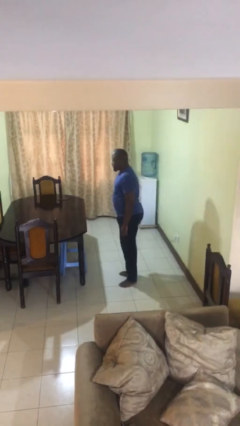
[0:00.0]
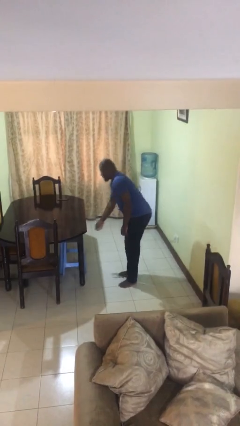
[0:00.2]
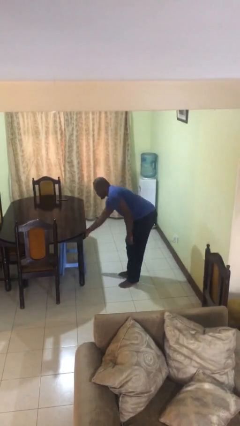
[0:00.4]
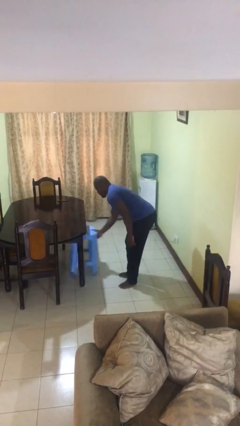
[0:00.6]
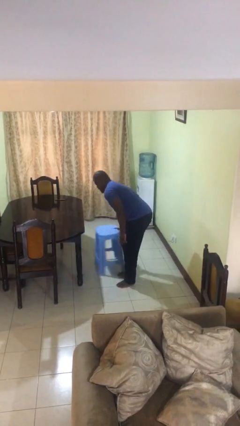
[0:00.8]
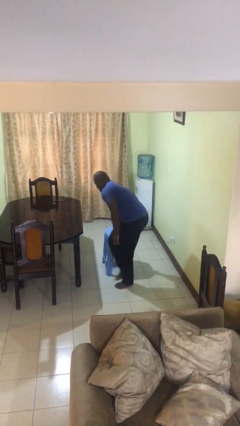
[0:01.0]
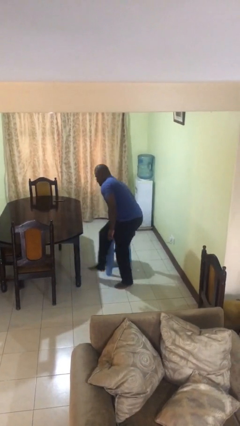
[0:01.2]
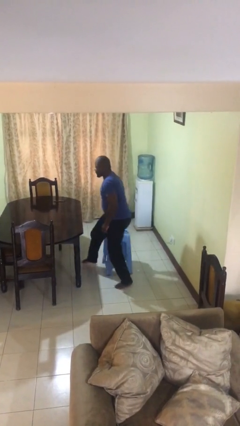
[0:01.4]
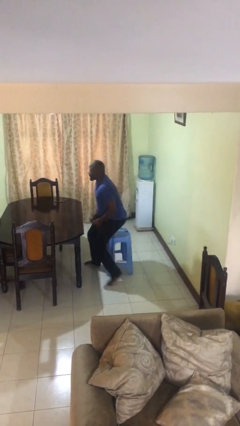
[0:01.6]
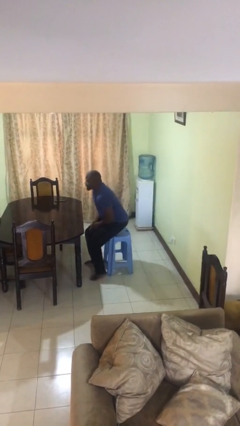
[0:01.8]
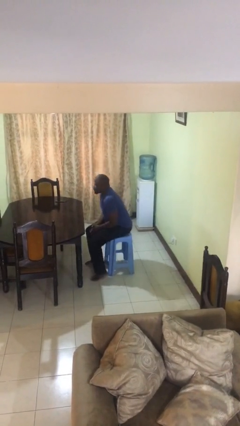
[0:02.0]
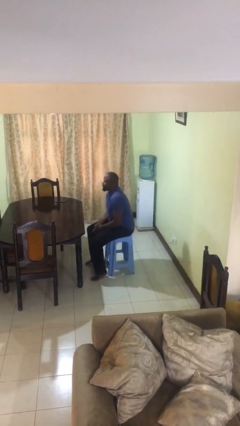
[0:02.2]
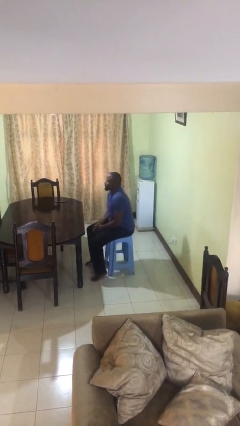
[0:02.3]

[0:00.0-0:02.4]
person sits down

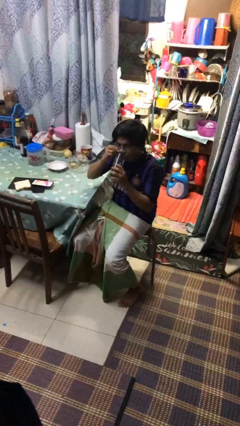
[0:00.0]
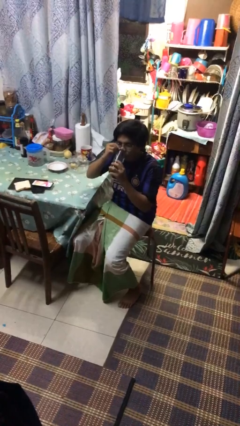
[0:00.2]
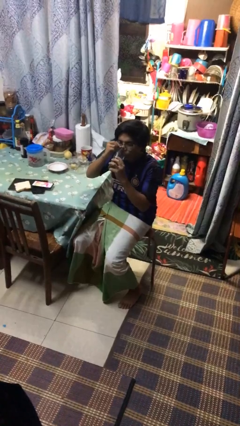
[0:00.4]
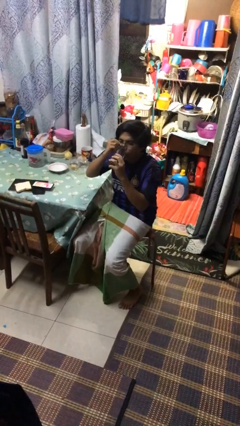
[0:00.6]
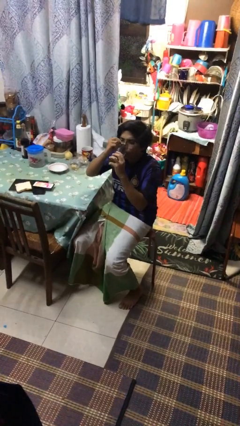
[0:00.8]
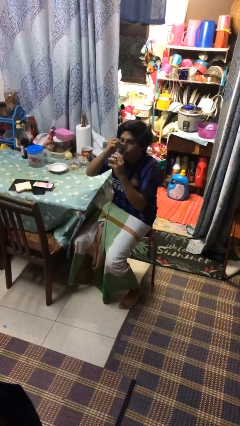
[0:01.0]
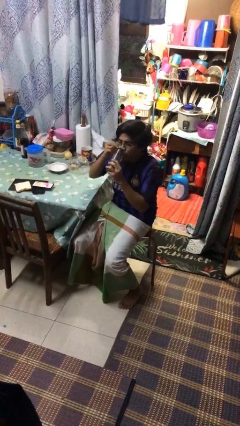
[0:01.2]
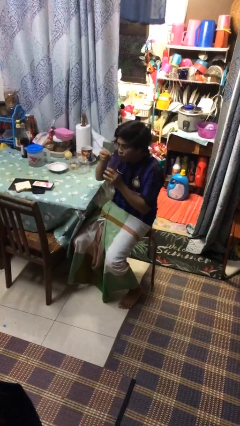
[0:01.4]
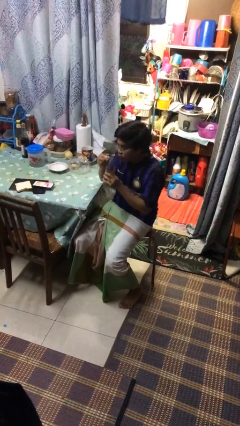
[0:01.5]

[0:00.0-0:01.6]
person drinks from mug

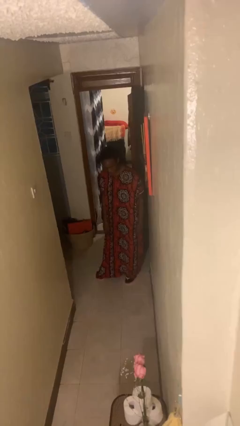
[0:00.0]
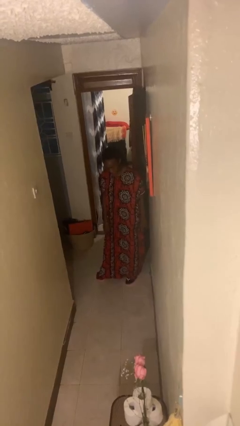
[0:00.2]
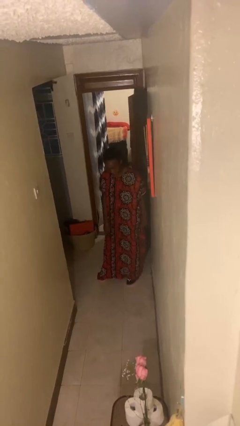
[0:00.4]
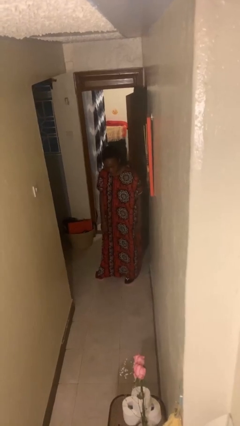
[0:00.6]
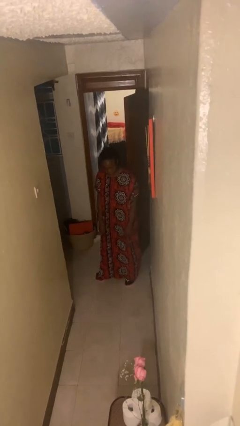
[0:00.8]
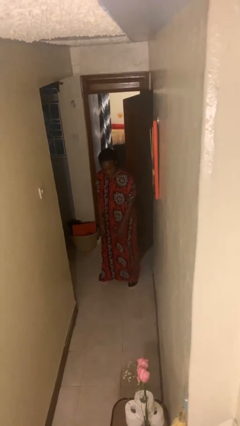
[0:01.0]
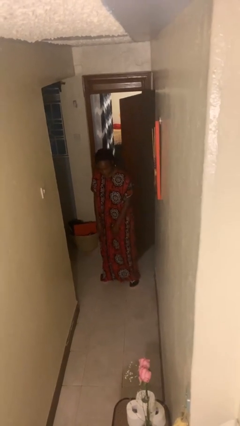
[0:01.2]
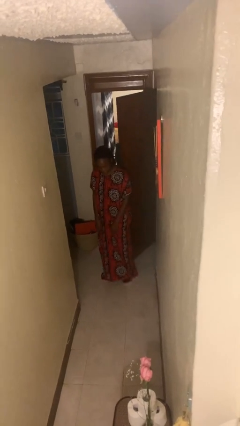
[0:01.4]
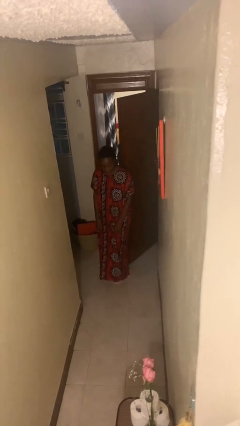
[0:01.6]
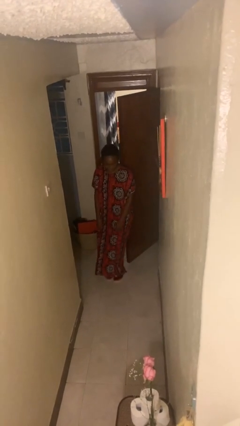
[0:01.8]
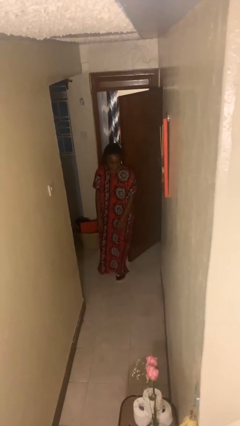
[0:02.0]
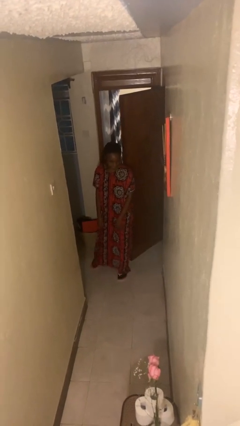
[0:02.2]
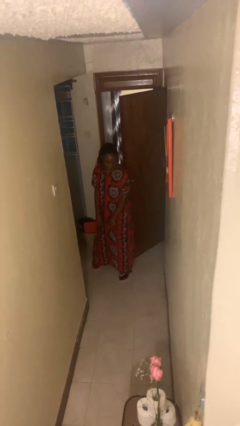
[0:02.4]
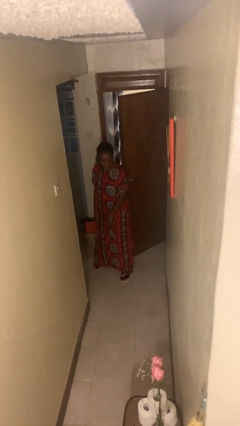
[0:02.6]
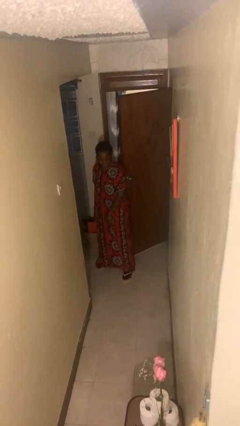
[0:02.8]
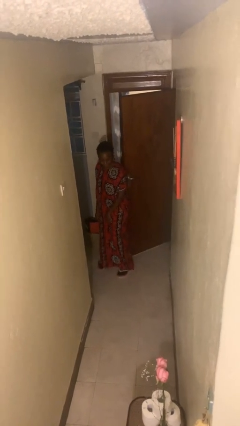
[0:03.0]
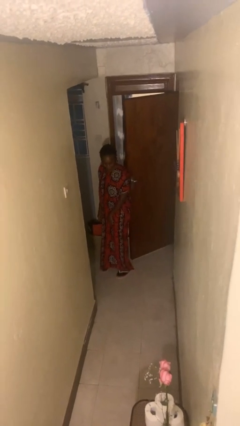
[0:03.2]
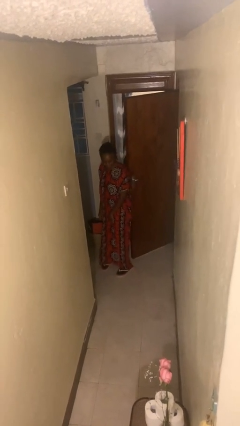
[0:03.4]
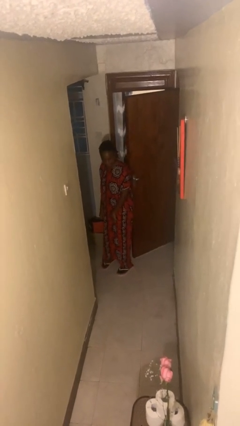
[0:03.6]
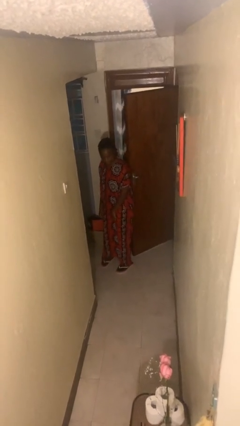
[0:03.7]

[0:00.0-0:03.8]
person opens facility door

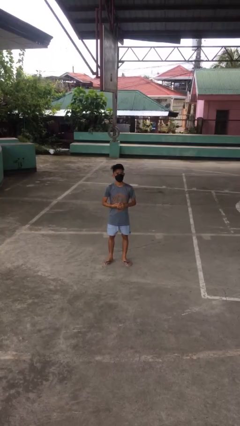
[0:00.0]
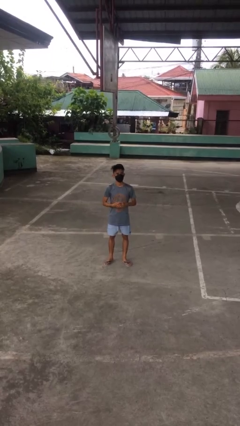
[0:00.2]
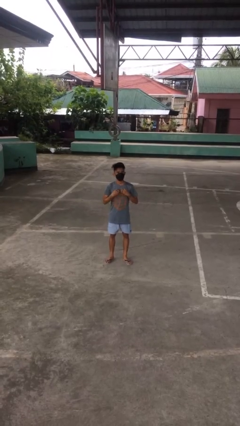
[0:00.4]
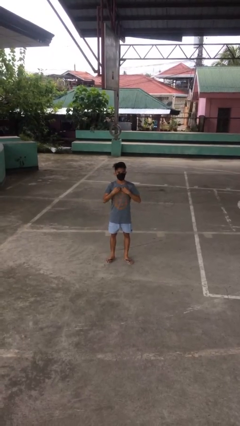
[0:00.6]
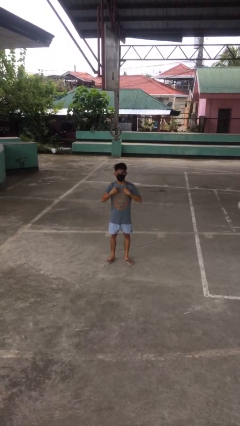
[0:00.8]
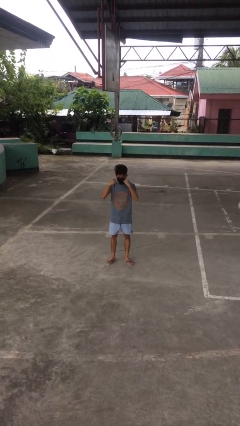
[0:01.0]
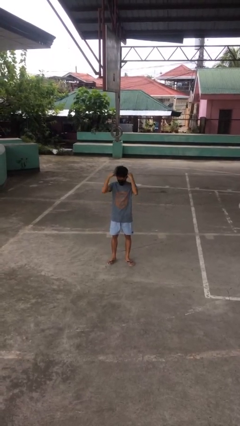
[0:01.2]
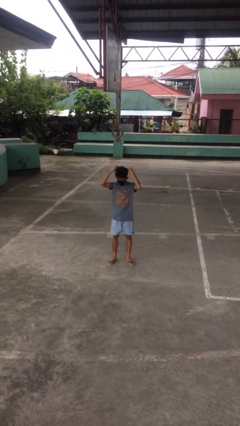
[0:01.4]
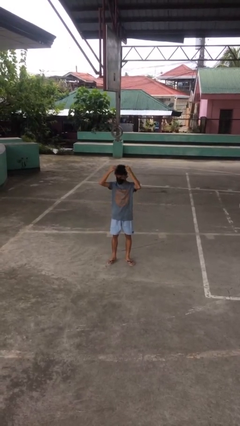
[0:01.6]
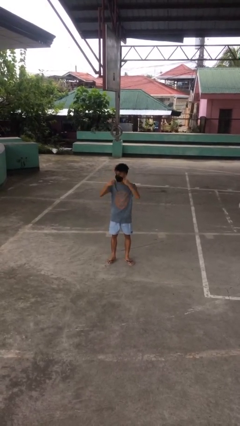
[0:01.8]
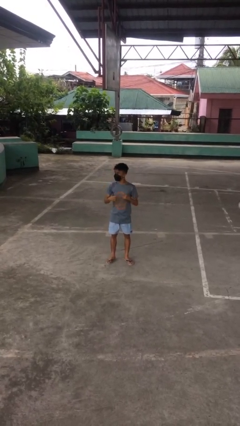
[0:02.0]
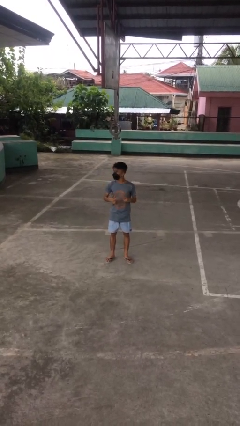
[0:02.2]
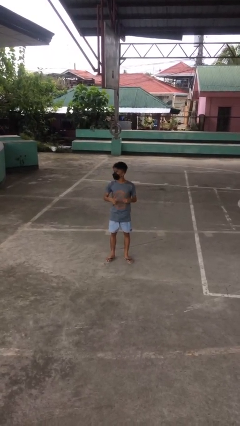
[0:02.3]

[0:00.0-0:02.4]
person takes off necklace

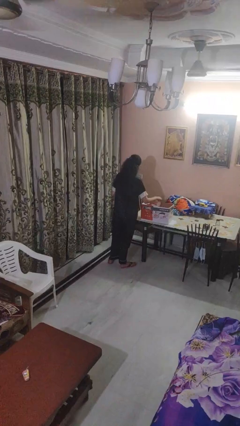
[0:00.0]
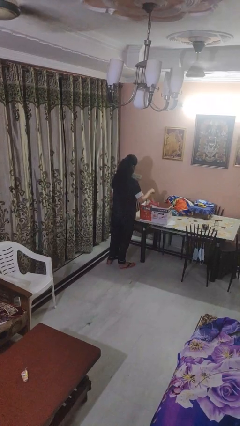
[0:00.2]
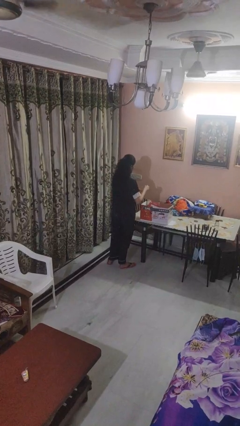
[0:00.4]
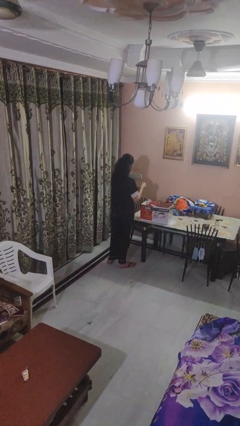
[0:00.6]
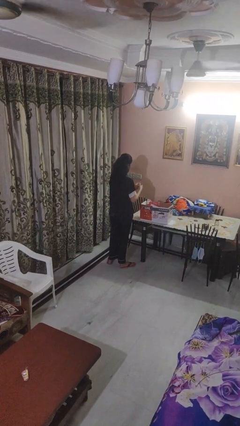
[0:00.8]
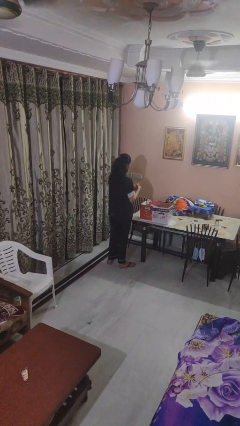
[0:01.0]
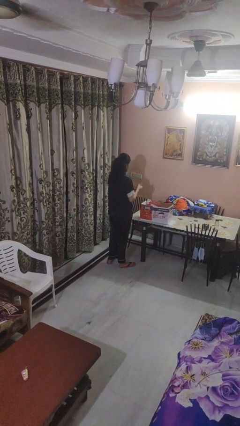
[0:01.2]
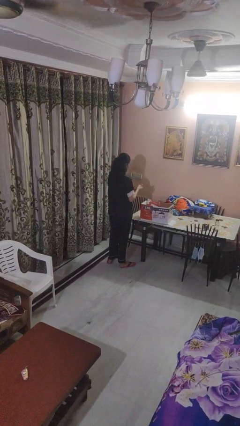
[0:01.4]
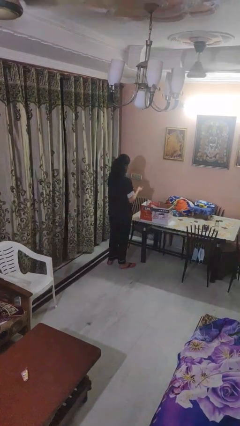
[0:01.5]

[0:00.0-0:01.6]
person takes object from box

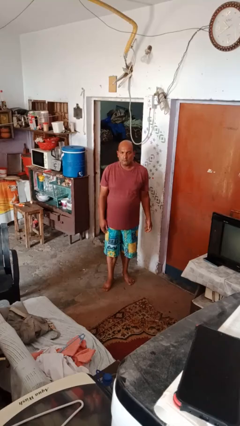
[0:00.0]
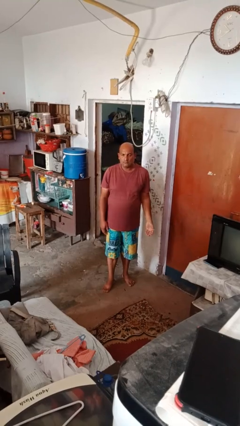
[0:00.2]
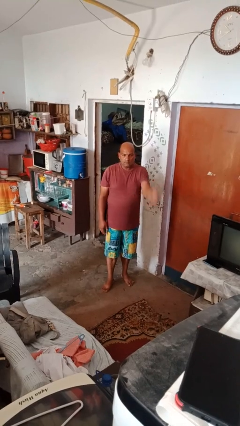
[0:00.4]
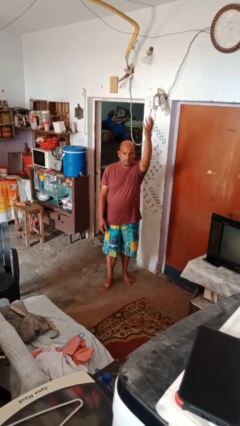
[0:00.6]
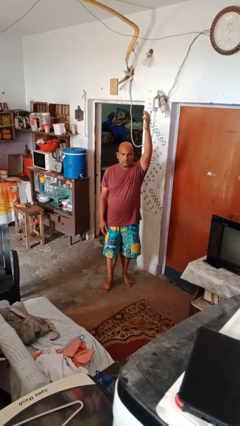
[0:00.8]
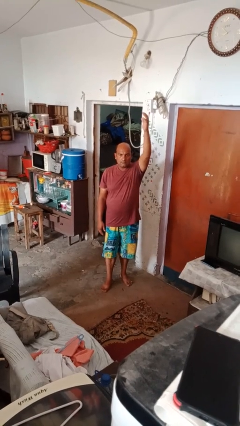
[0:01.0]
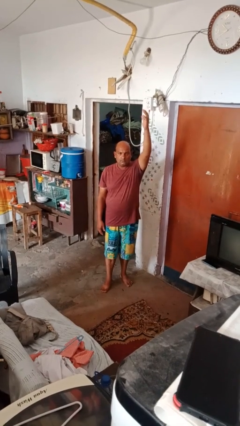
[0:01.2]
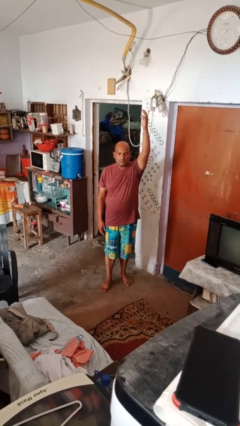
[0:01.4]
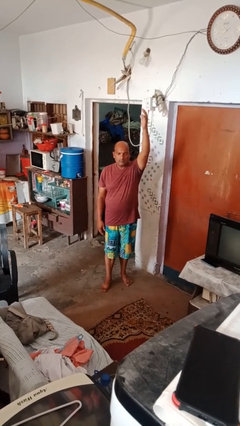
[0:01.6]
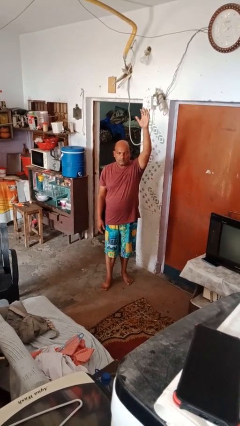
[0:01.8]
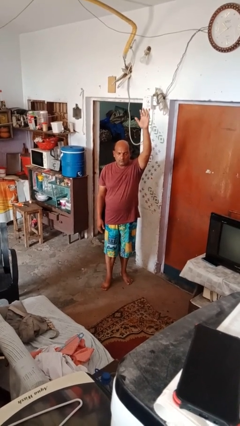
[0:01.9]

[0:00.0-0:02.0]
person gestures swipe up

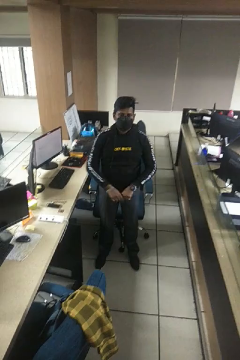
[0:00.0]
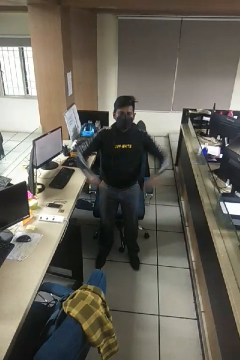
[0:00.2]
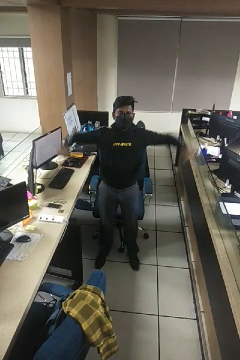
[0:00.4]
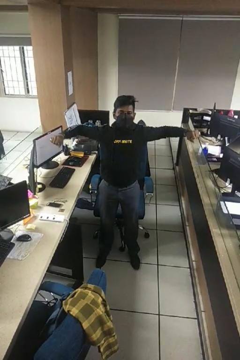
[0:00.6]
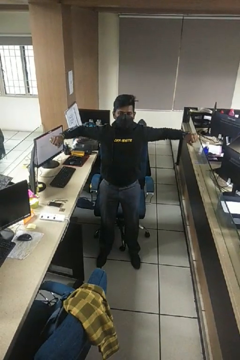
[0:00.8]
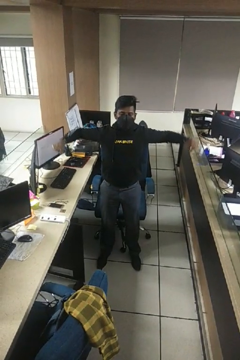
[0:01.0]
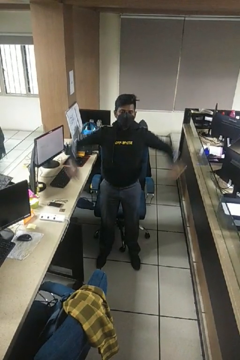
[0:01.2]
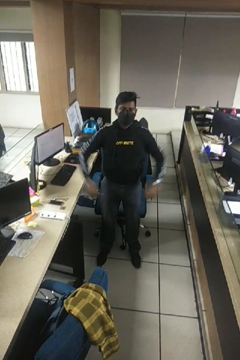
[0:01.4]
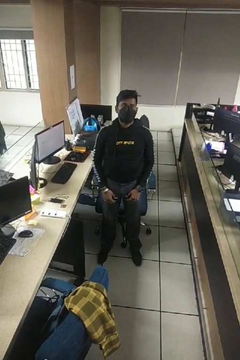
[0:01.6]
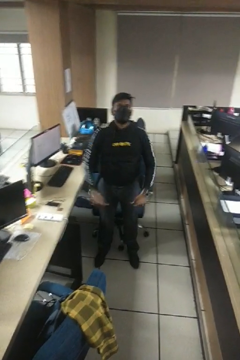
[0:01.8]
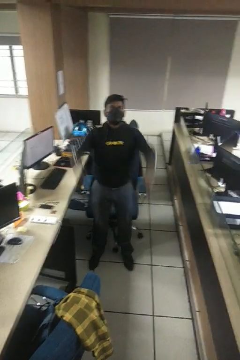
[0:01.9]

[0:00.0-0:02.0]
person stretches arms to side

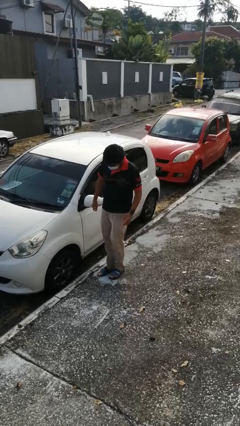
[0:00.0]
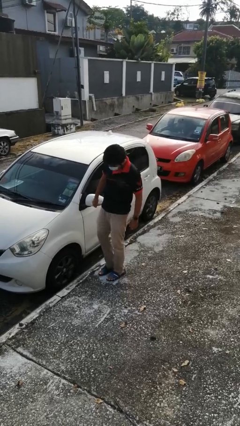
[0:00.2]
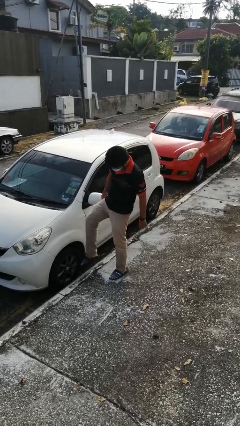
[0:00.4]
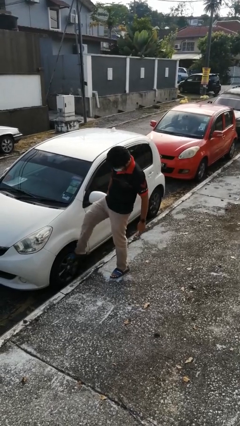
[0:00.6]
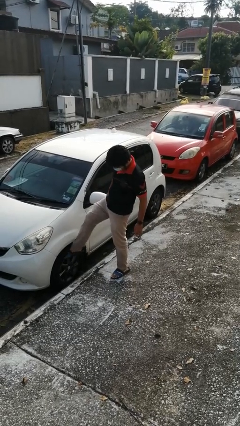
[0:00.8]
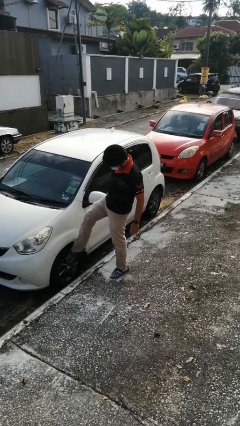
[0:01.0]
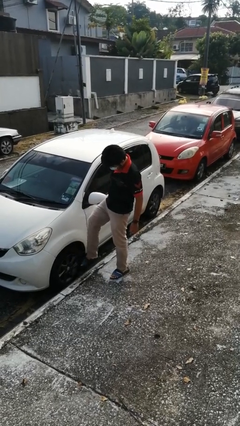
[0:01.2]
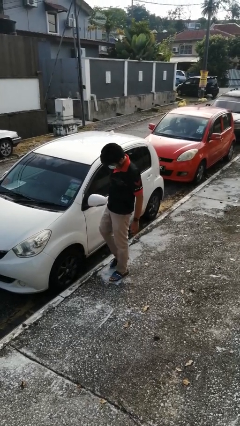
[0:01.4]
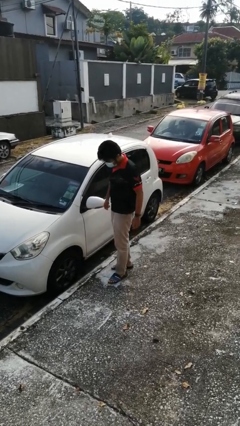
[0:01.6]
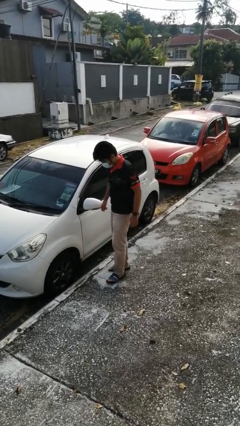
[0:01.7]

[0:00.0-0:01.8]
person kicks car tires
